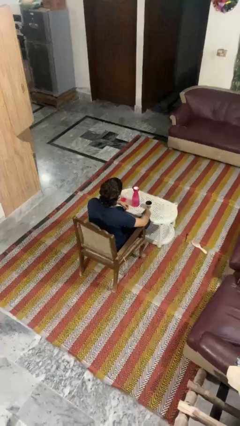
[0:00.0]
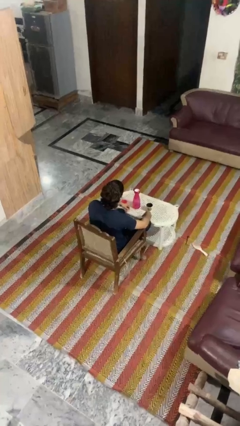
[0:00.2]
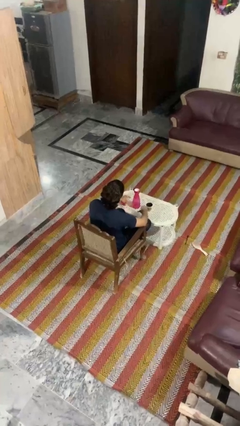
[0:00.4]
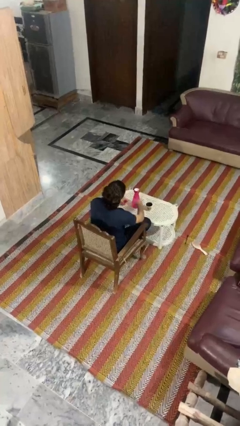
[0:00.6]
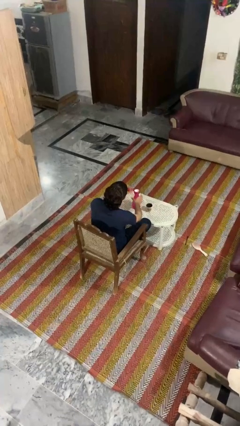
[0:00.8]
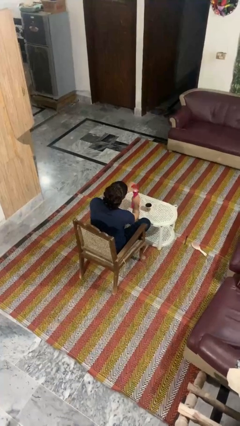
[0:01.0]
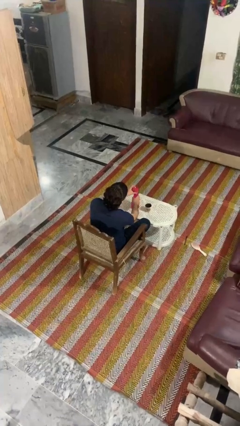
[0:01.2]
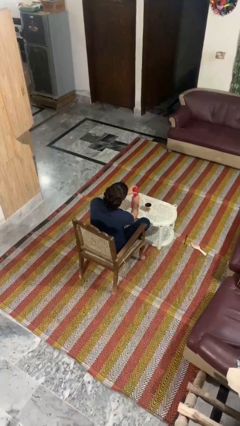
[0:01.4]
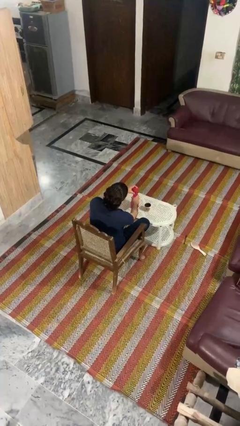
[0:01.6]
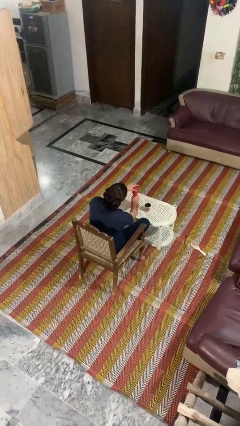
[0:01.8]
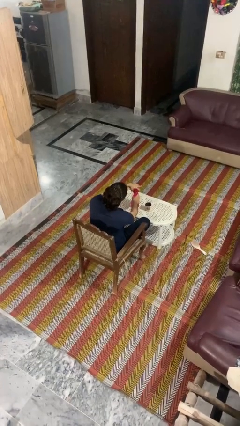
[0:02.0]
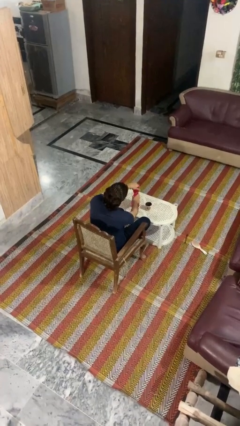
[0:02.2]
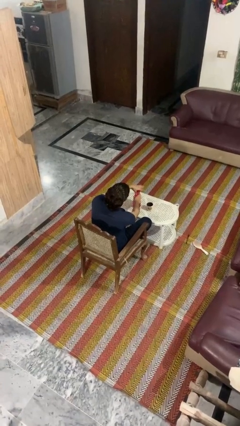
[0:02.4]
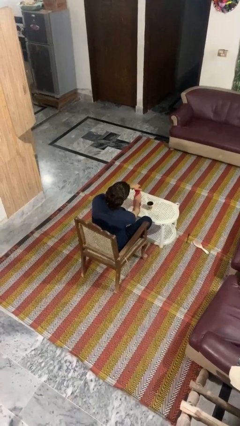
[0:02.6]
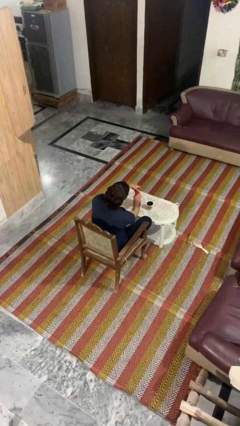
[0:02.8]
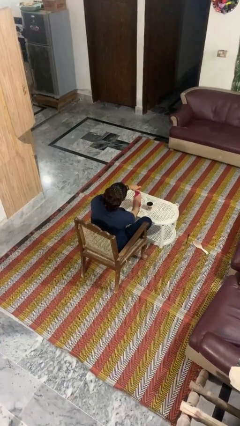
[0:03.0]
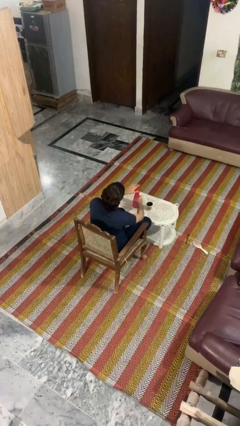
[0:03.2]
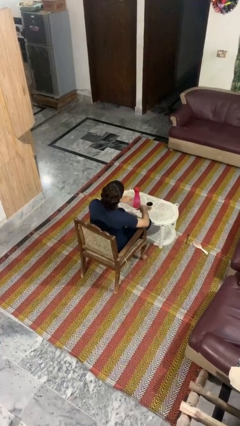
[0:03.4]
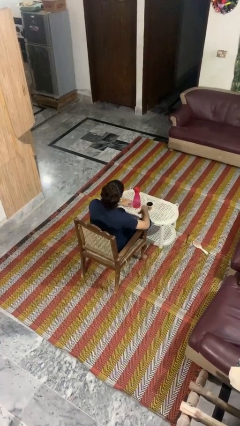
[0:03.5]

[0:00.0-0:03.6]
person screws lid to bottle

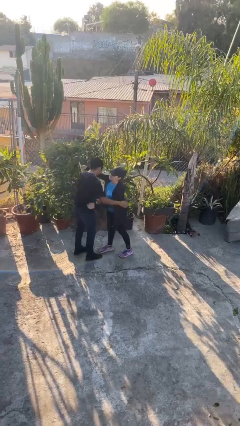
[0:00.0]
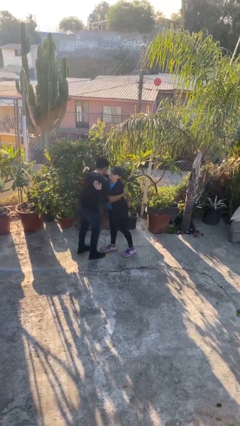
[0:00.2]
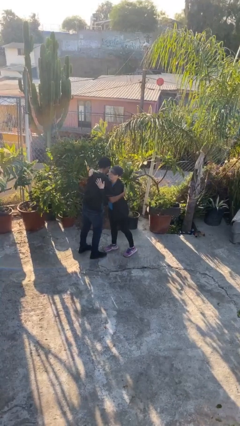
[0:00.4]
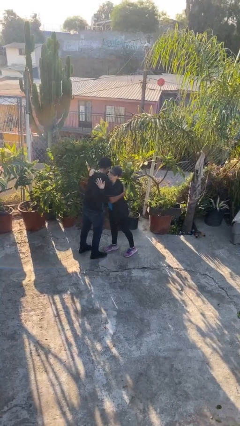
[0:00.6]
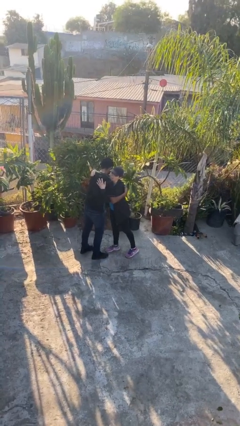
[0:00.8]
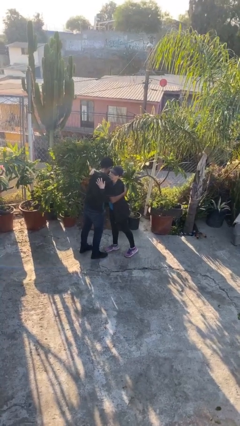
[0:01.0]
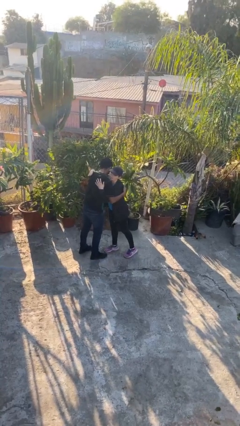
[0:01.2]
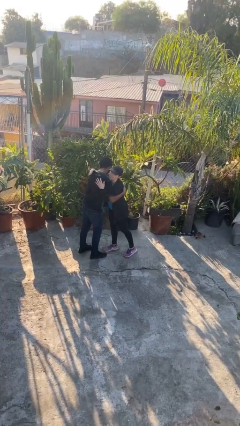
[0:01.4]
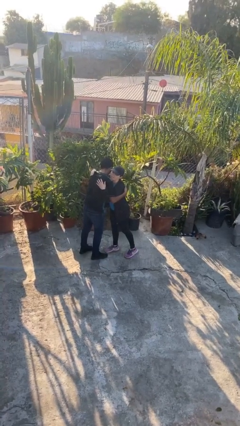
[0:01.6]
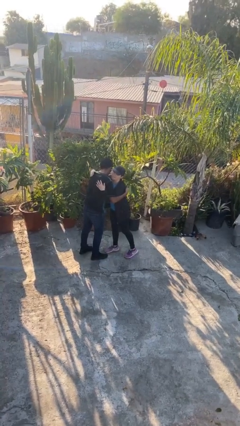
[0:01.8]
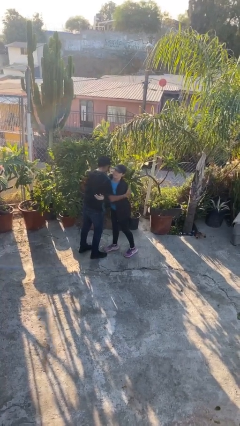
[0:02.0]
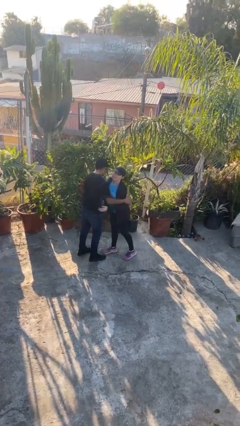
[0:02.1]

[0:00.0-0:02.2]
person embraces person

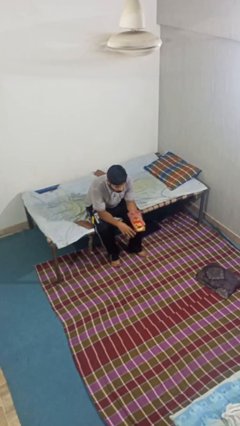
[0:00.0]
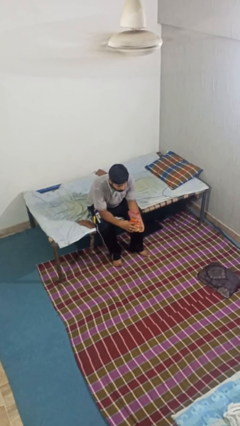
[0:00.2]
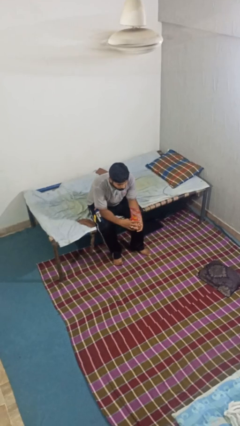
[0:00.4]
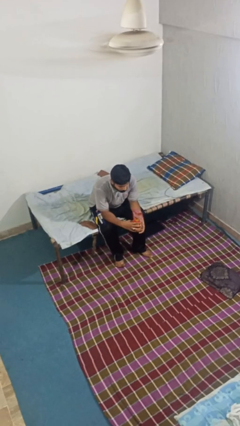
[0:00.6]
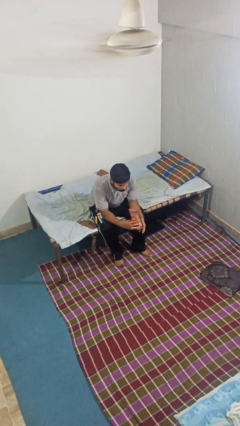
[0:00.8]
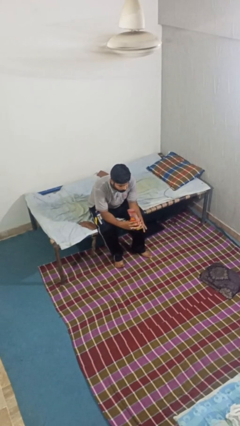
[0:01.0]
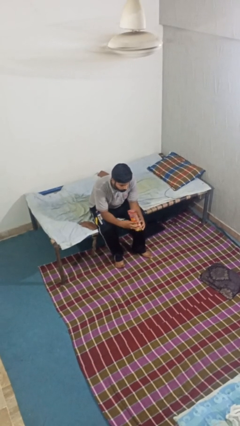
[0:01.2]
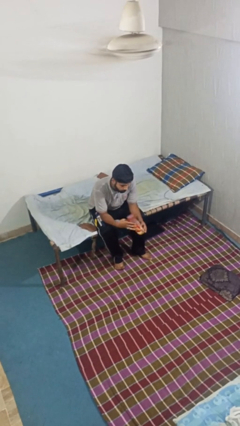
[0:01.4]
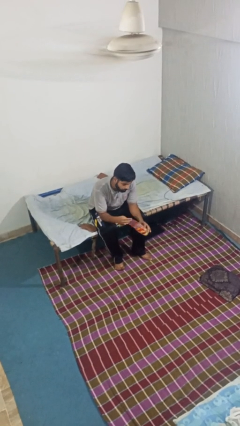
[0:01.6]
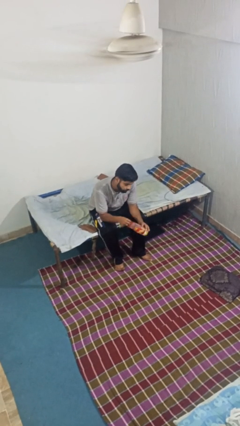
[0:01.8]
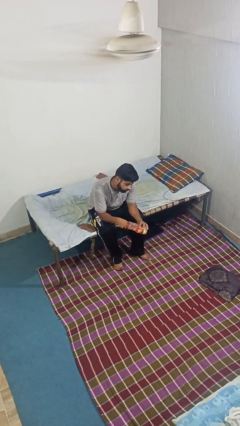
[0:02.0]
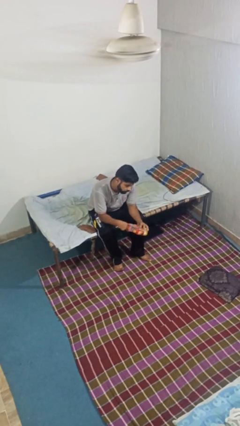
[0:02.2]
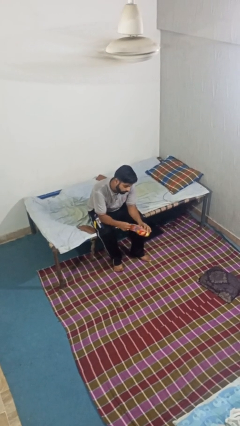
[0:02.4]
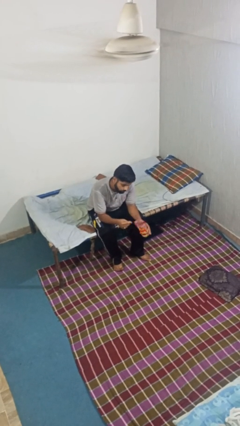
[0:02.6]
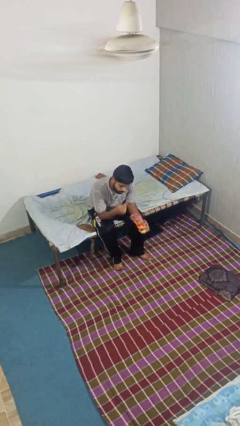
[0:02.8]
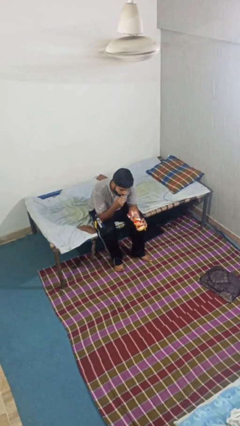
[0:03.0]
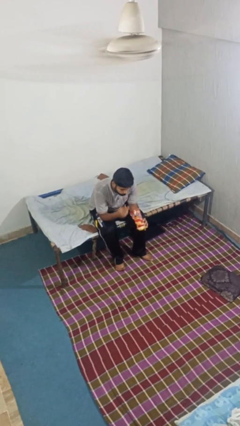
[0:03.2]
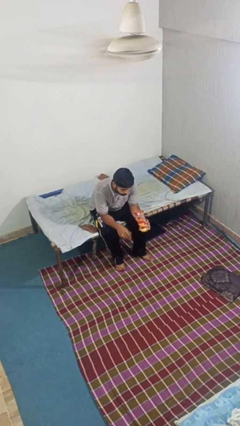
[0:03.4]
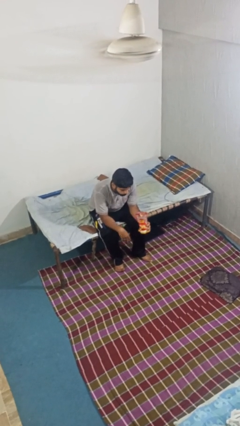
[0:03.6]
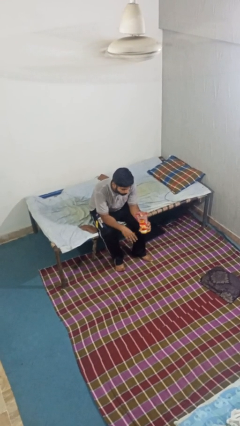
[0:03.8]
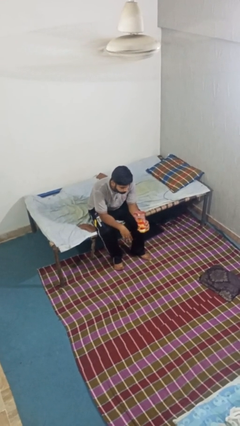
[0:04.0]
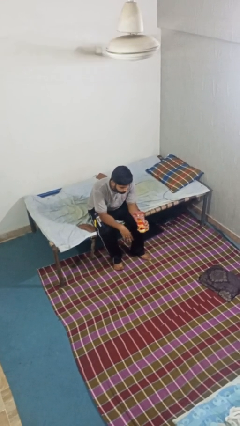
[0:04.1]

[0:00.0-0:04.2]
person eats snack from bag

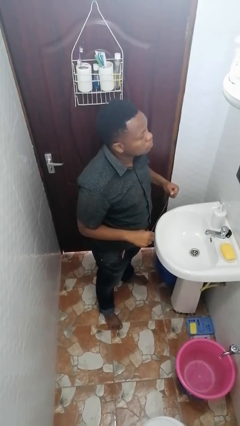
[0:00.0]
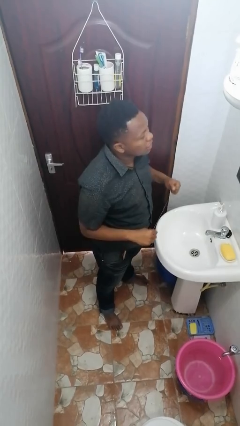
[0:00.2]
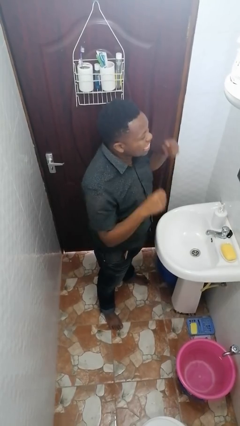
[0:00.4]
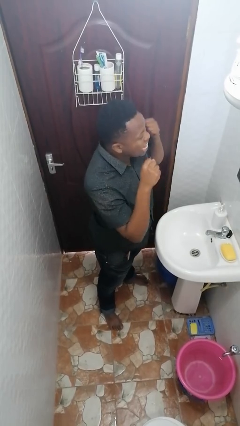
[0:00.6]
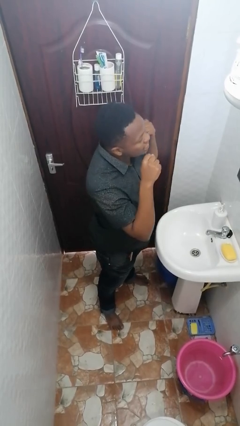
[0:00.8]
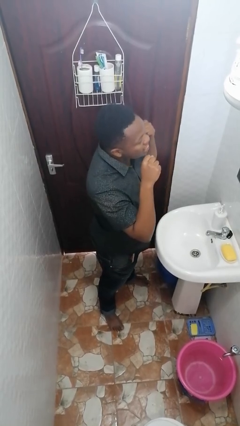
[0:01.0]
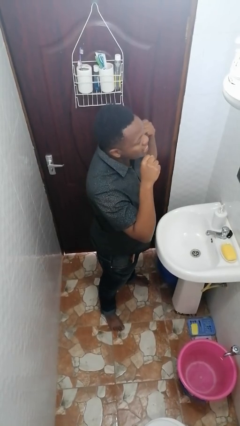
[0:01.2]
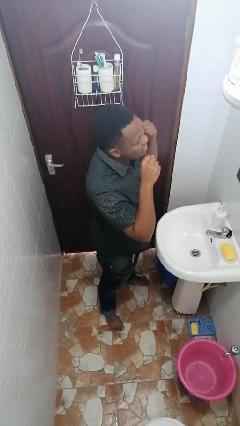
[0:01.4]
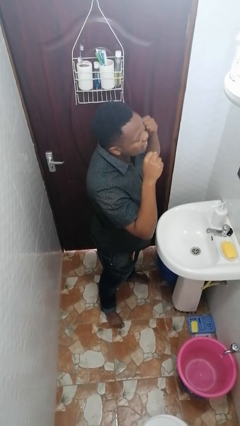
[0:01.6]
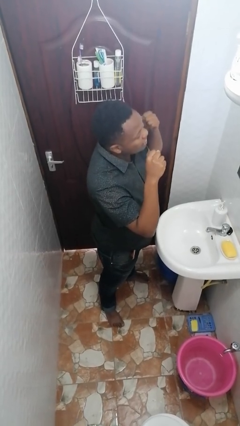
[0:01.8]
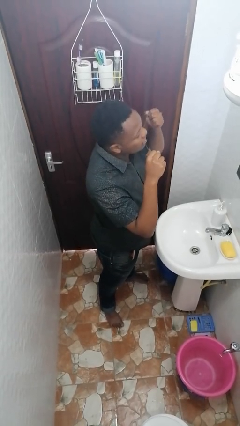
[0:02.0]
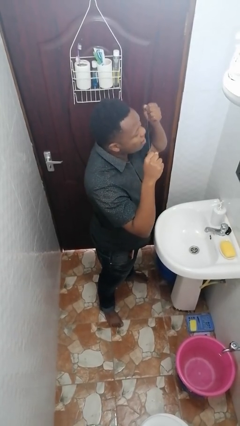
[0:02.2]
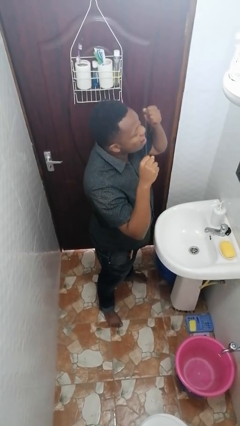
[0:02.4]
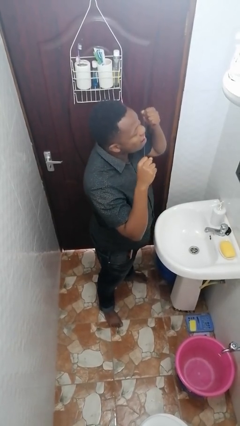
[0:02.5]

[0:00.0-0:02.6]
person flosses

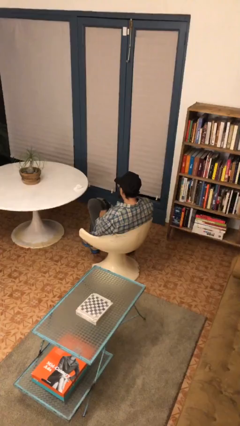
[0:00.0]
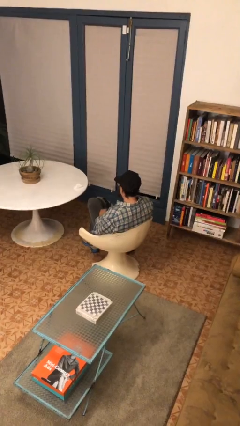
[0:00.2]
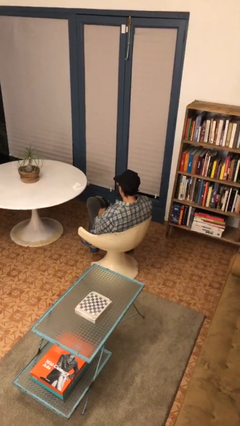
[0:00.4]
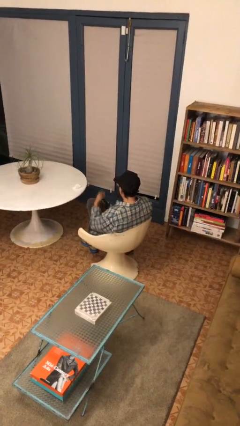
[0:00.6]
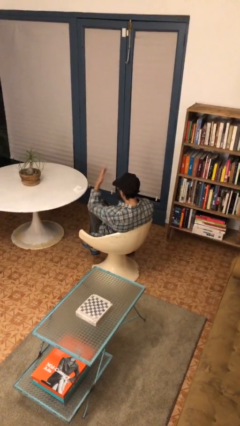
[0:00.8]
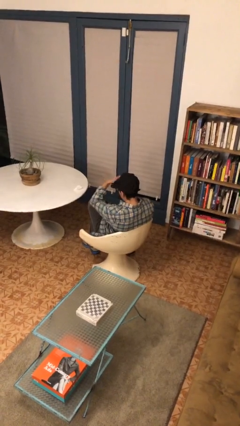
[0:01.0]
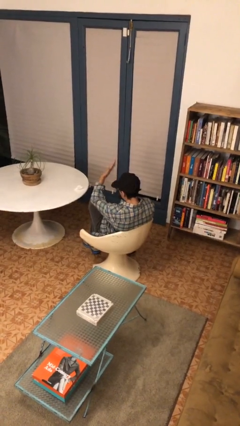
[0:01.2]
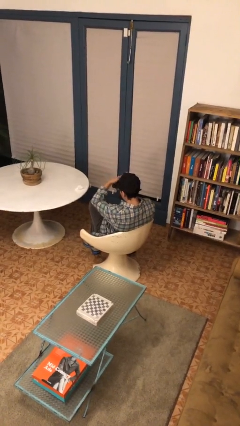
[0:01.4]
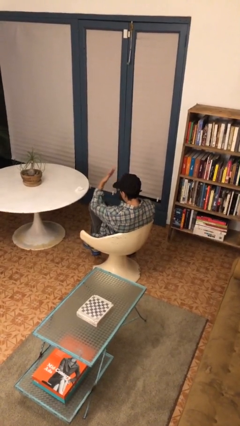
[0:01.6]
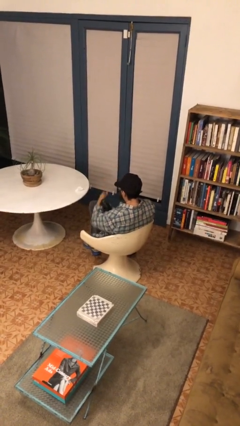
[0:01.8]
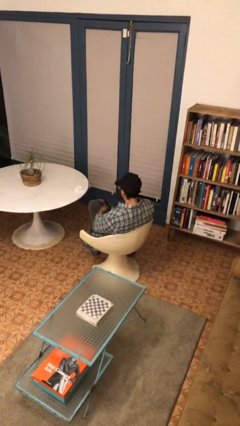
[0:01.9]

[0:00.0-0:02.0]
person pats head

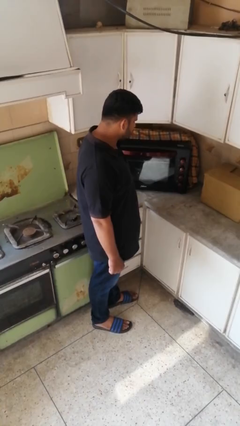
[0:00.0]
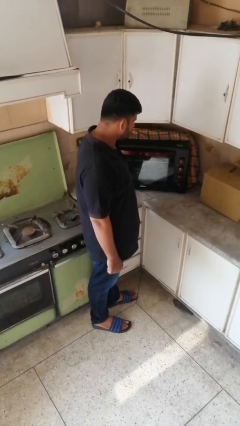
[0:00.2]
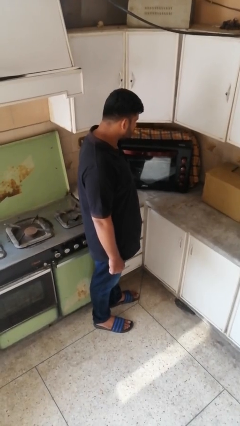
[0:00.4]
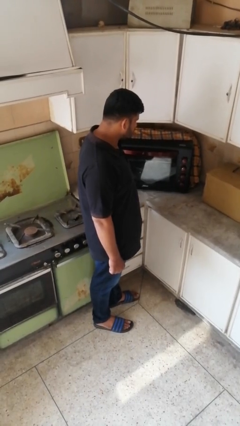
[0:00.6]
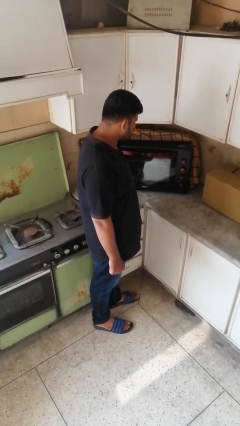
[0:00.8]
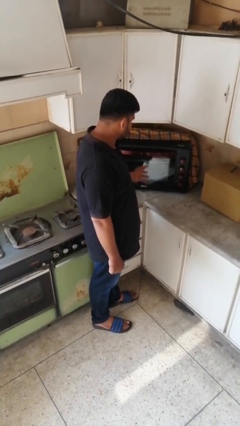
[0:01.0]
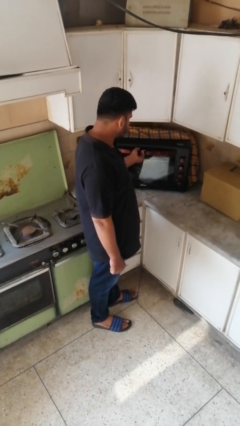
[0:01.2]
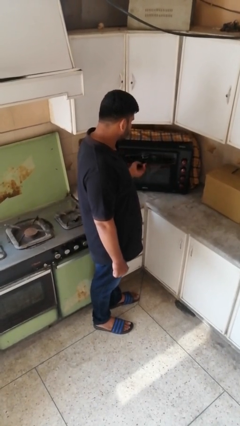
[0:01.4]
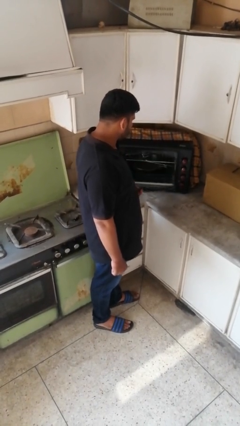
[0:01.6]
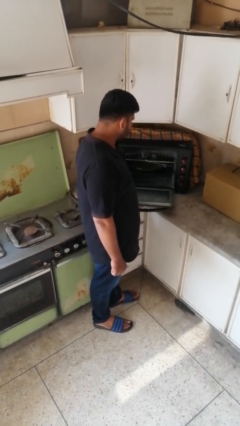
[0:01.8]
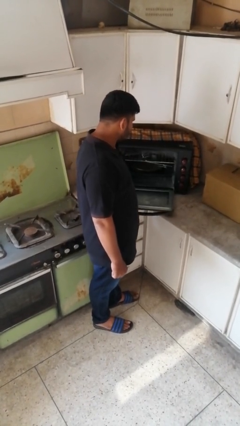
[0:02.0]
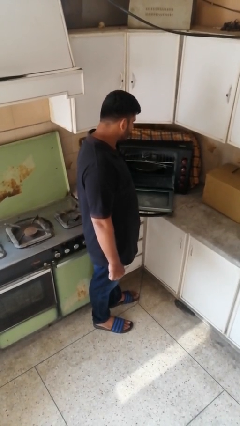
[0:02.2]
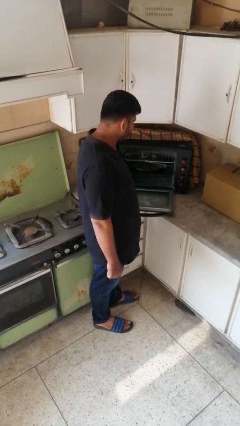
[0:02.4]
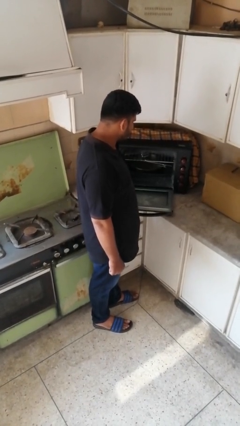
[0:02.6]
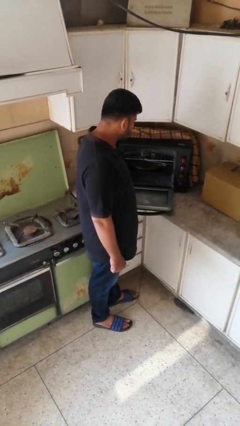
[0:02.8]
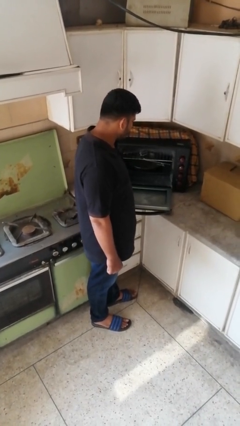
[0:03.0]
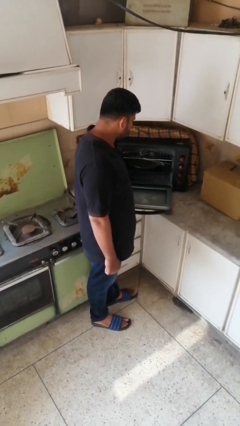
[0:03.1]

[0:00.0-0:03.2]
person opens oven door
